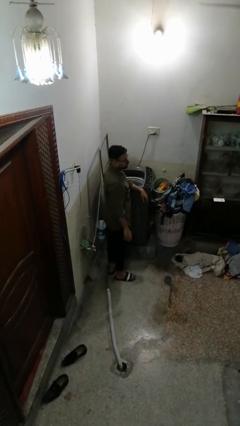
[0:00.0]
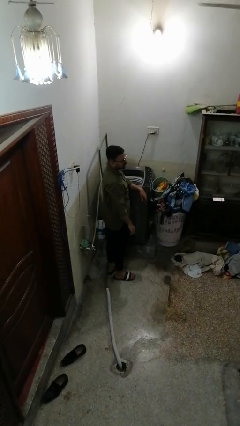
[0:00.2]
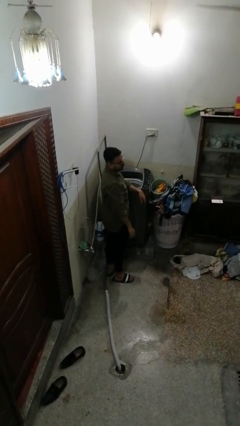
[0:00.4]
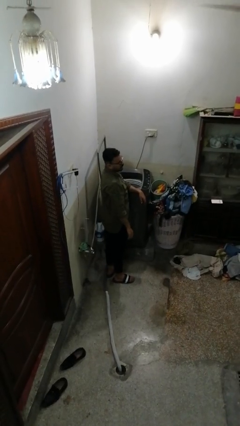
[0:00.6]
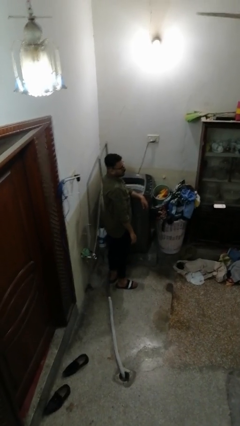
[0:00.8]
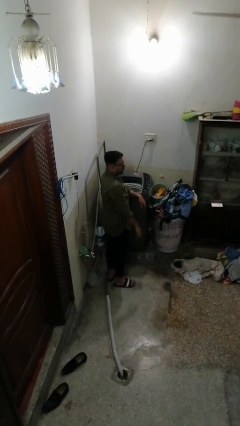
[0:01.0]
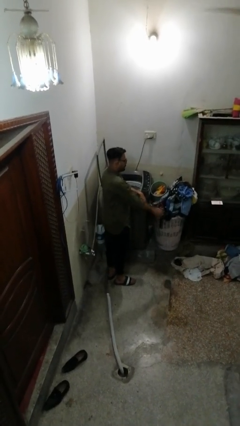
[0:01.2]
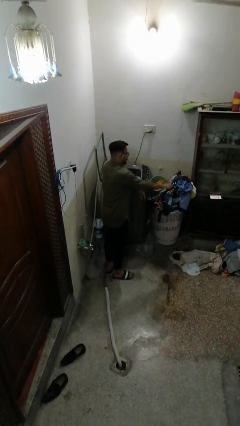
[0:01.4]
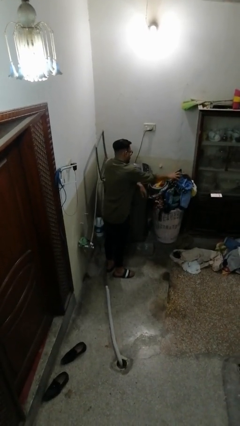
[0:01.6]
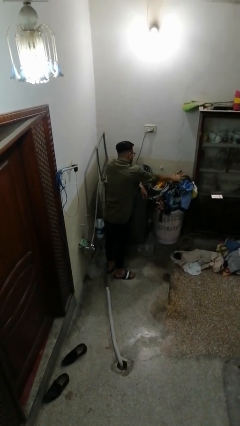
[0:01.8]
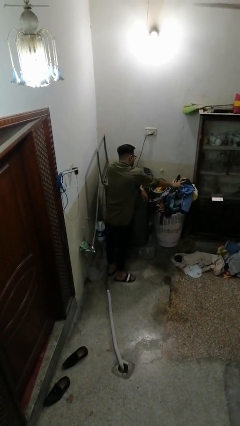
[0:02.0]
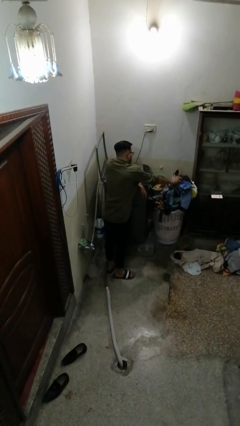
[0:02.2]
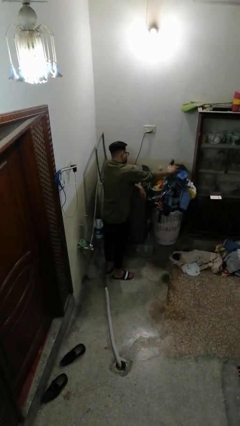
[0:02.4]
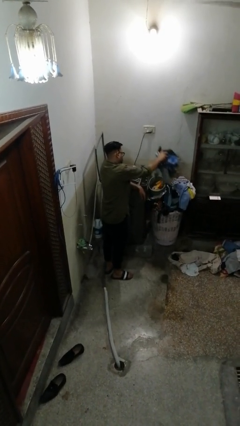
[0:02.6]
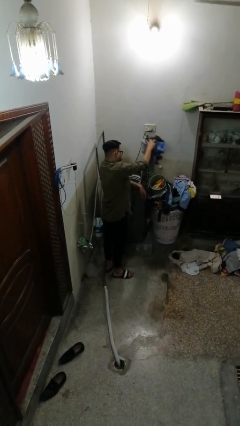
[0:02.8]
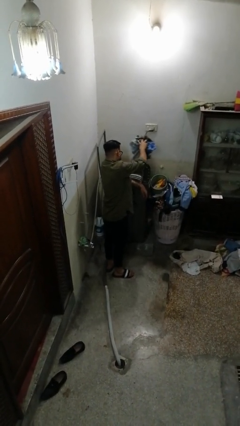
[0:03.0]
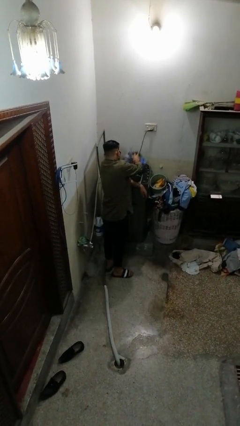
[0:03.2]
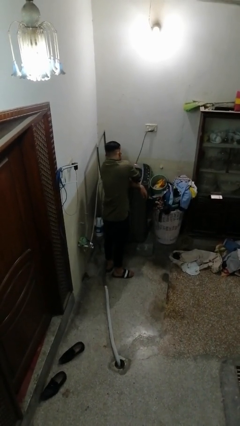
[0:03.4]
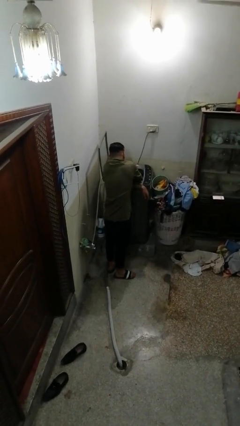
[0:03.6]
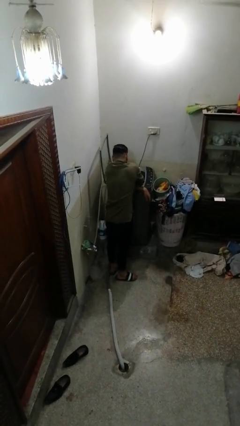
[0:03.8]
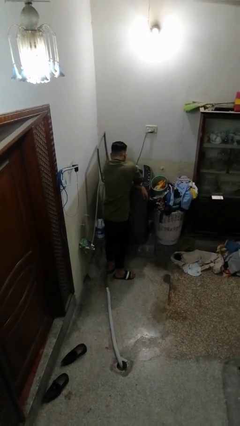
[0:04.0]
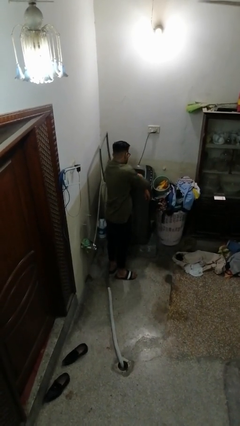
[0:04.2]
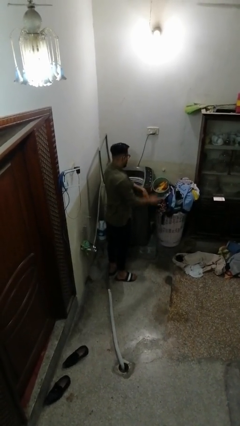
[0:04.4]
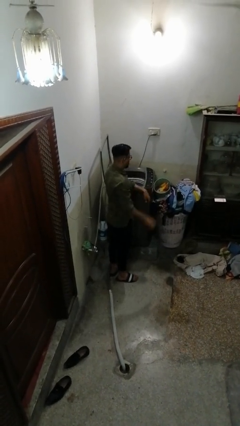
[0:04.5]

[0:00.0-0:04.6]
person loads clotheswasher

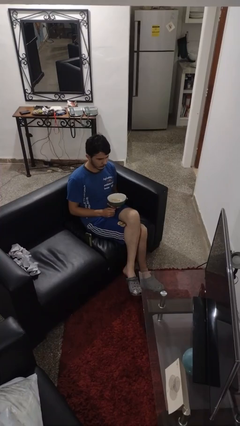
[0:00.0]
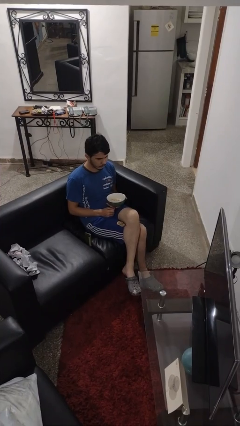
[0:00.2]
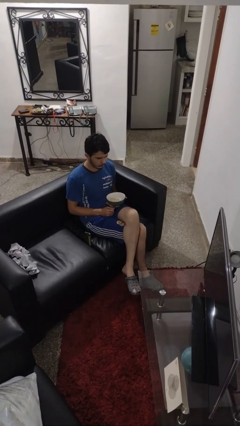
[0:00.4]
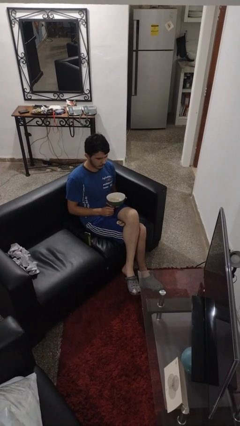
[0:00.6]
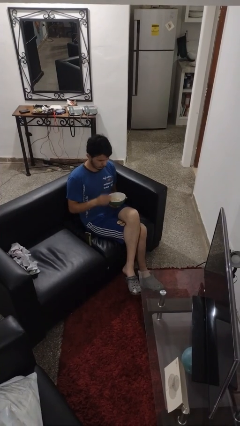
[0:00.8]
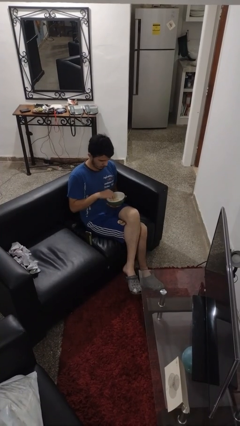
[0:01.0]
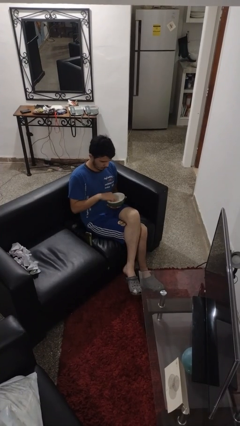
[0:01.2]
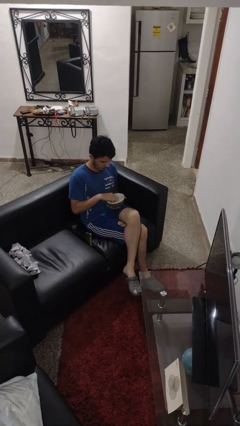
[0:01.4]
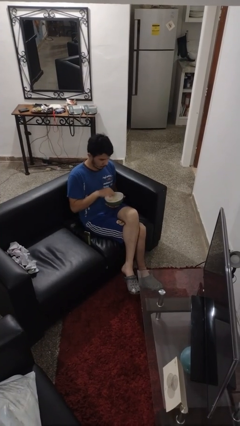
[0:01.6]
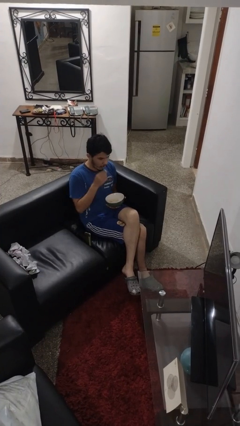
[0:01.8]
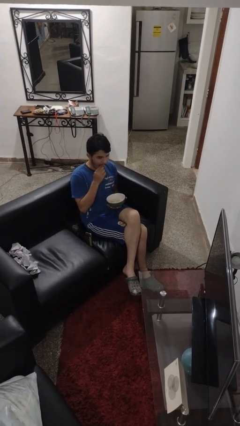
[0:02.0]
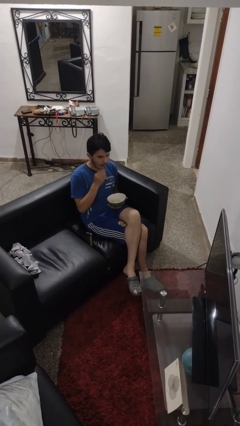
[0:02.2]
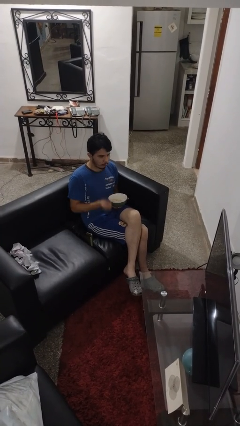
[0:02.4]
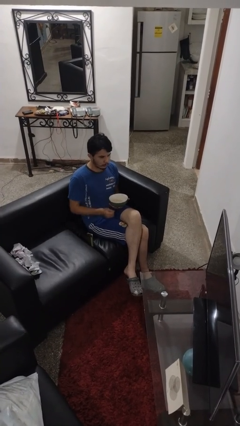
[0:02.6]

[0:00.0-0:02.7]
person eats with hands

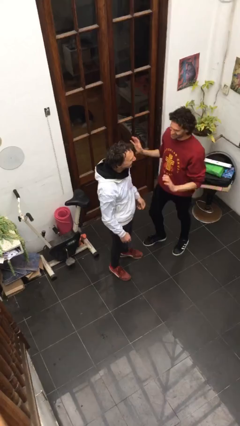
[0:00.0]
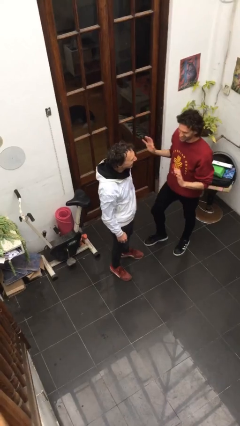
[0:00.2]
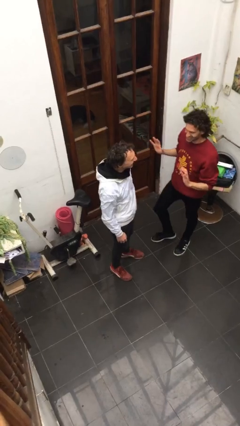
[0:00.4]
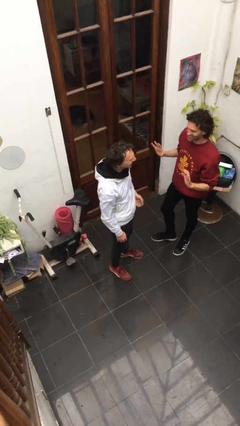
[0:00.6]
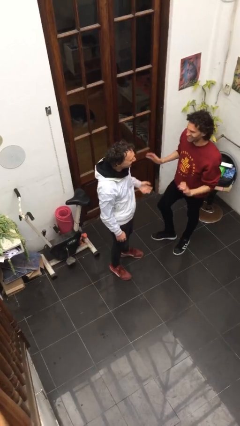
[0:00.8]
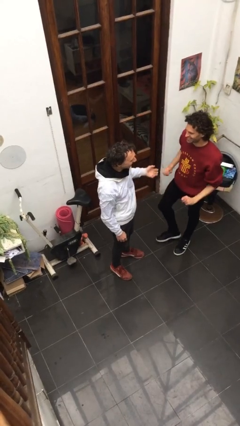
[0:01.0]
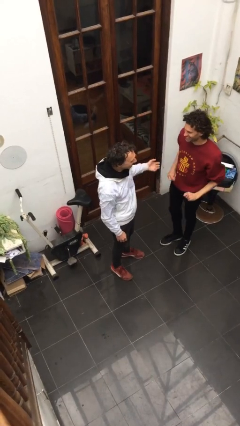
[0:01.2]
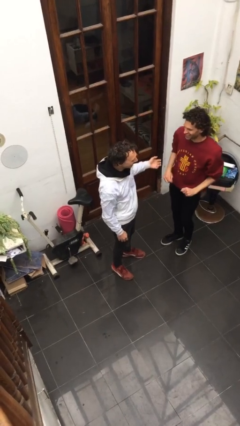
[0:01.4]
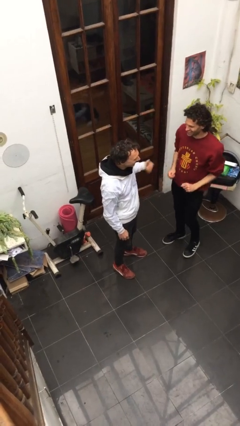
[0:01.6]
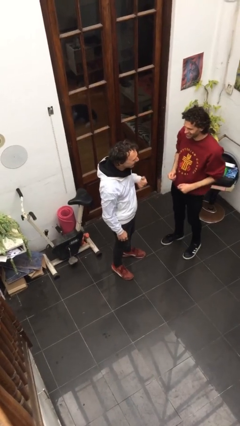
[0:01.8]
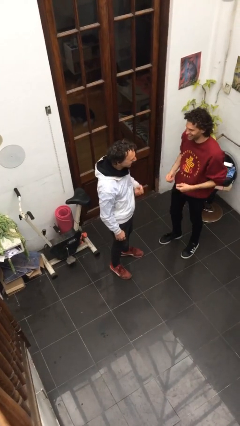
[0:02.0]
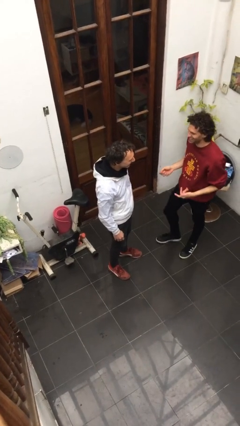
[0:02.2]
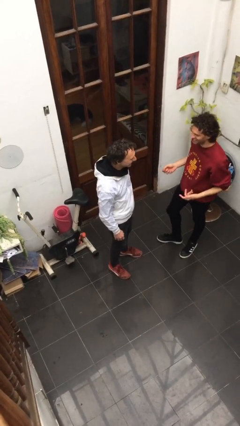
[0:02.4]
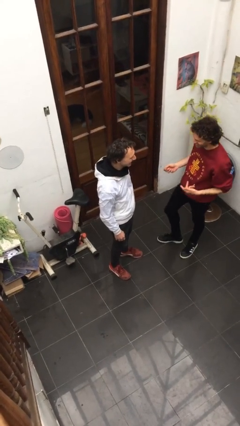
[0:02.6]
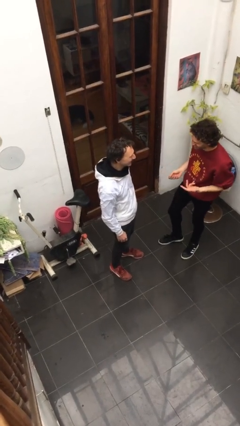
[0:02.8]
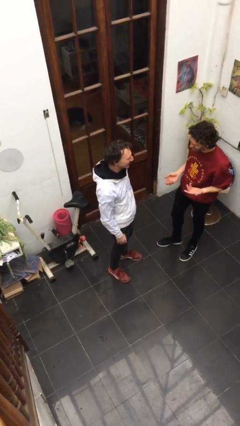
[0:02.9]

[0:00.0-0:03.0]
person talks to person

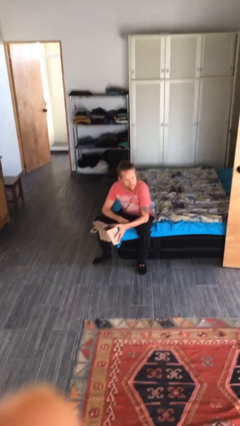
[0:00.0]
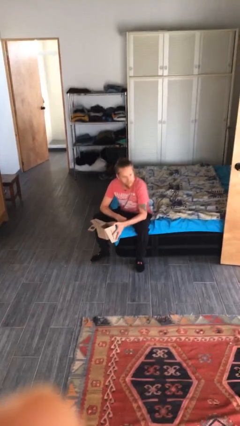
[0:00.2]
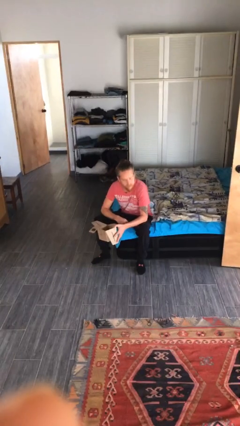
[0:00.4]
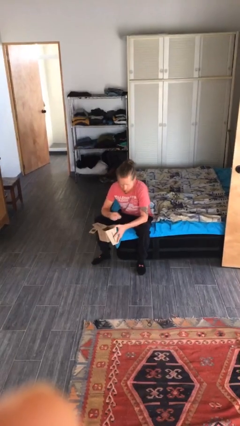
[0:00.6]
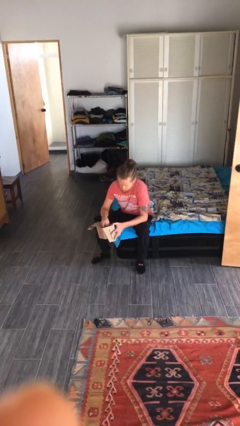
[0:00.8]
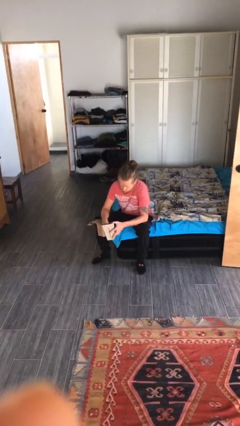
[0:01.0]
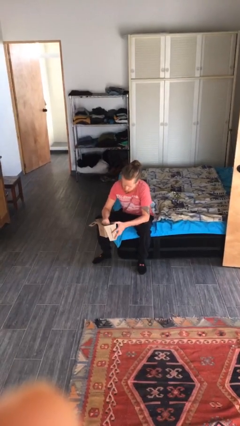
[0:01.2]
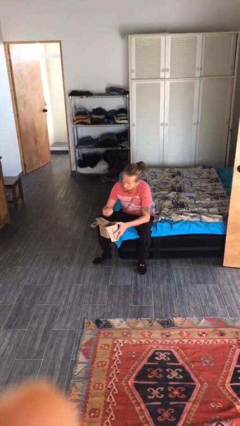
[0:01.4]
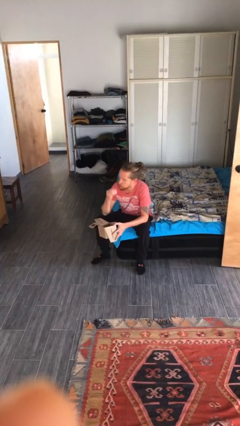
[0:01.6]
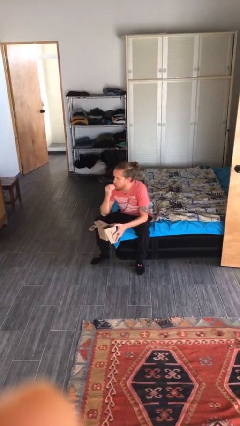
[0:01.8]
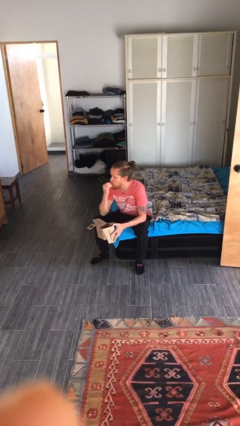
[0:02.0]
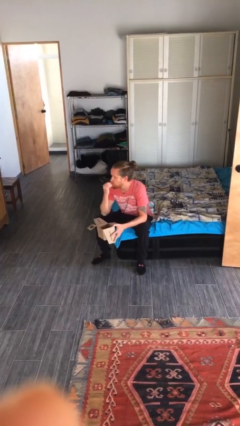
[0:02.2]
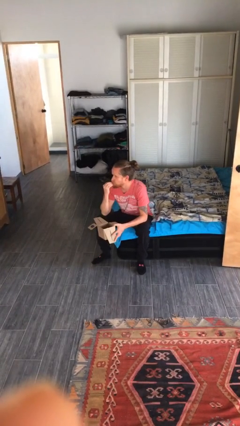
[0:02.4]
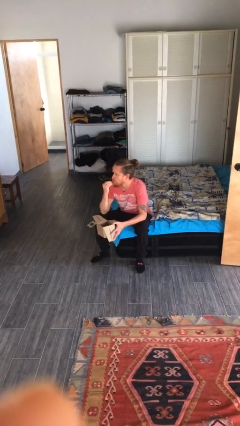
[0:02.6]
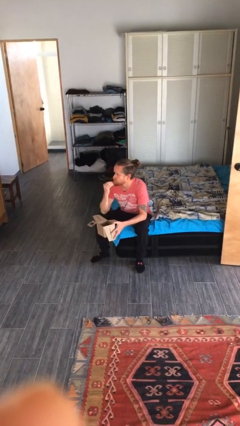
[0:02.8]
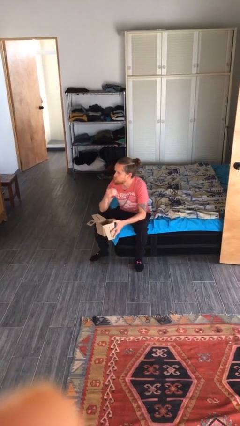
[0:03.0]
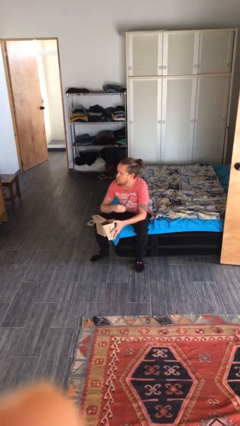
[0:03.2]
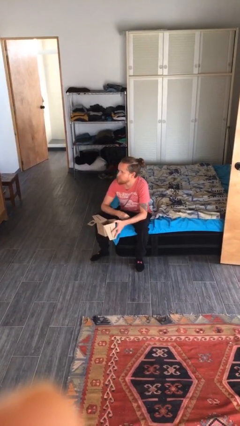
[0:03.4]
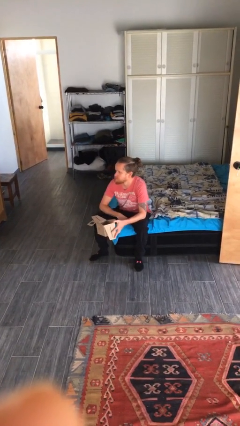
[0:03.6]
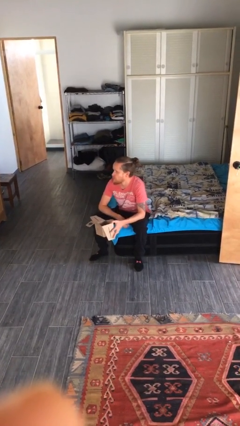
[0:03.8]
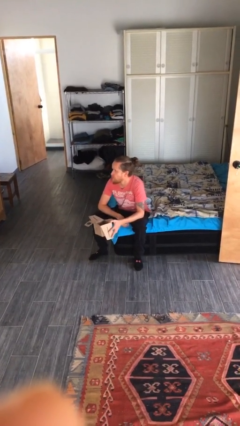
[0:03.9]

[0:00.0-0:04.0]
person eats snack from bag

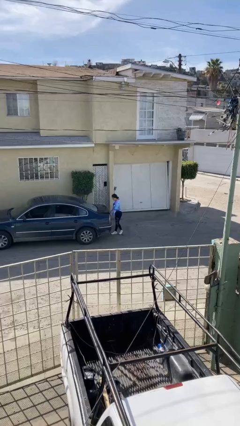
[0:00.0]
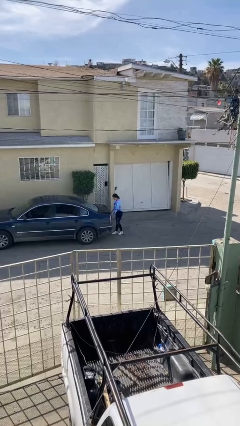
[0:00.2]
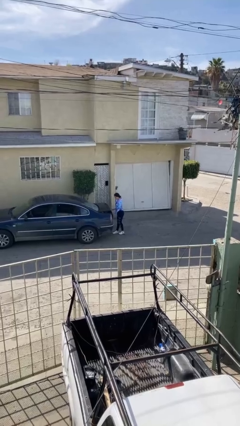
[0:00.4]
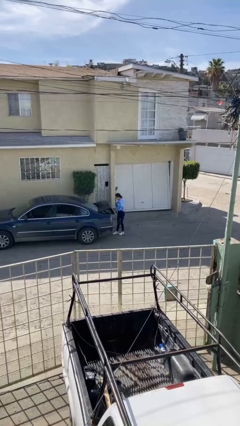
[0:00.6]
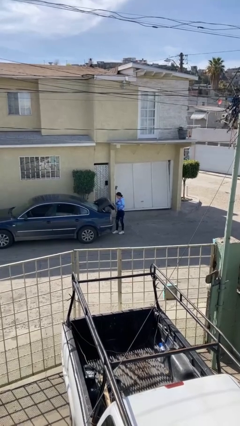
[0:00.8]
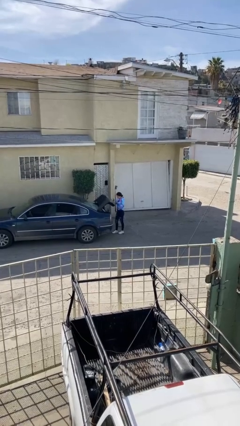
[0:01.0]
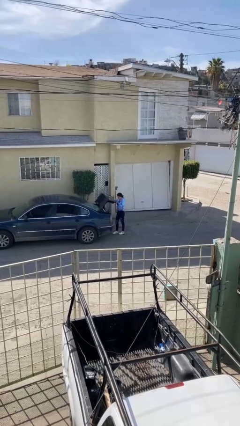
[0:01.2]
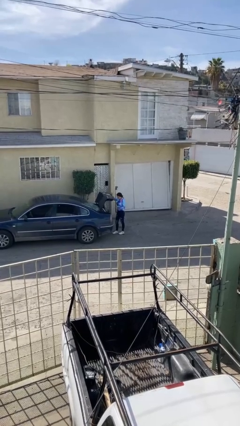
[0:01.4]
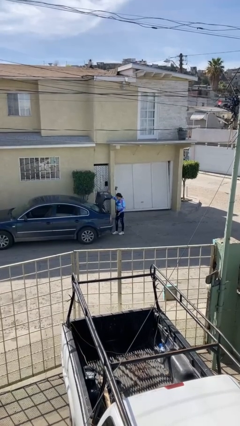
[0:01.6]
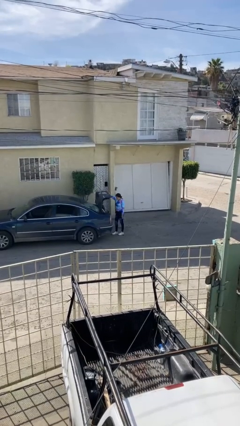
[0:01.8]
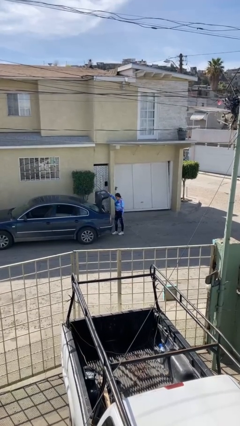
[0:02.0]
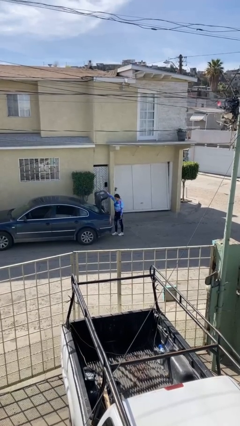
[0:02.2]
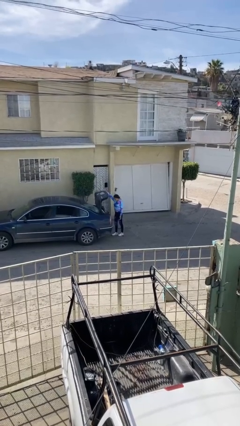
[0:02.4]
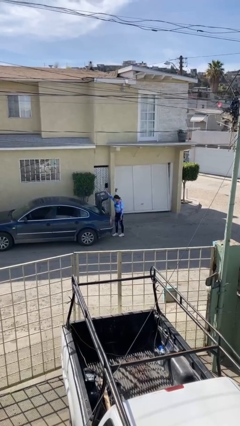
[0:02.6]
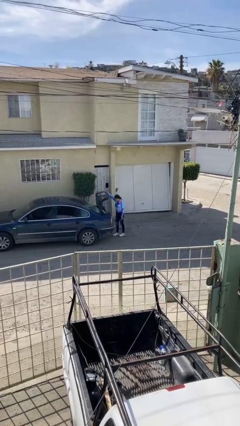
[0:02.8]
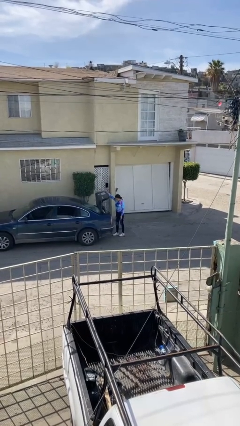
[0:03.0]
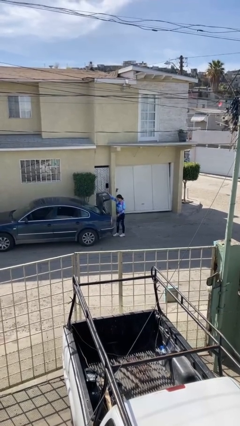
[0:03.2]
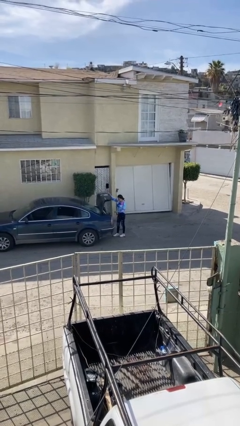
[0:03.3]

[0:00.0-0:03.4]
person opens car trunk

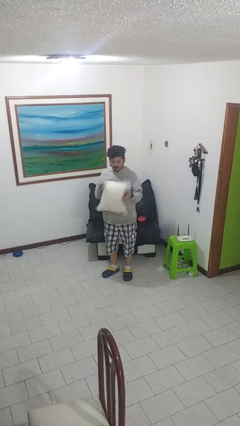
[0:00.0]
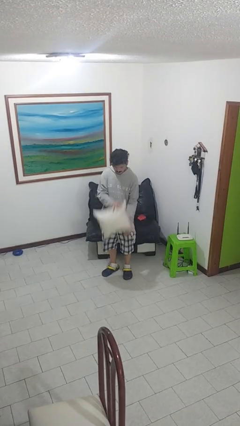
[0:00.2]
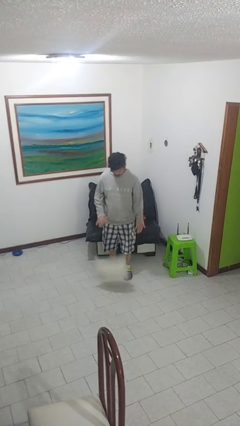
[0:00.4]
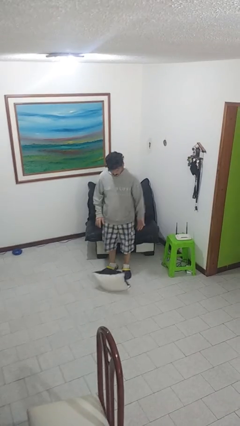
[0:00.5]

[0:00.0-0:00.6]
person drops object
